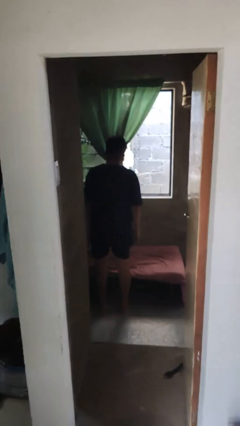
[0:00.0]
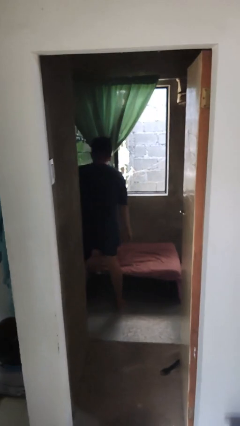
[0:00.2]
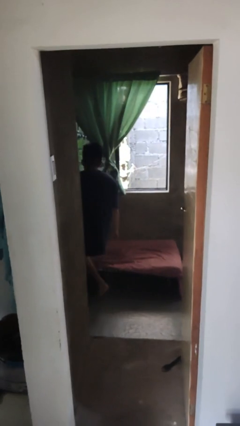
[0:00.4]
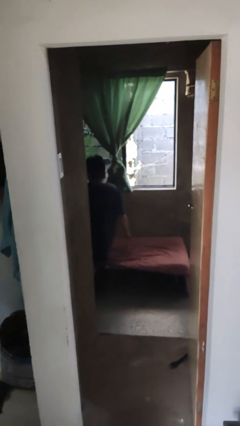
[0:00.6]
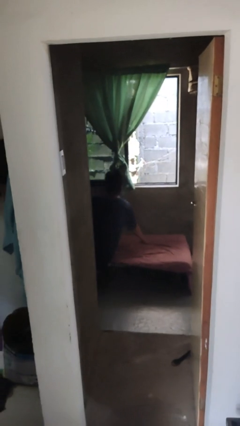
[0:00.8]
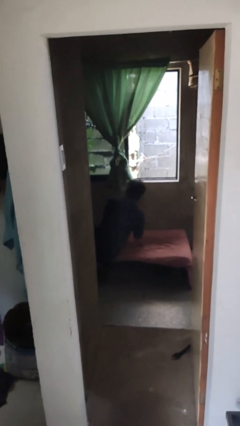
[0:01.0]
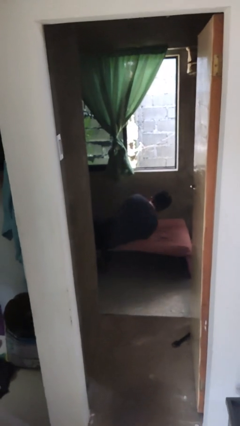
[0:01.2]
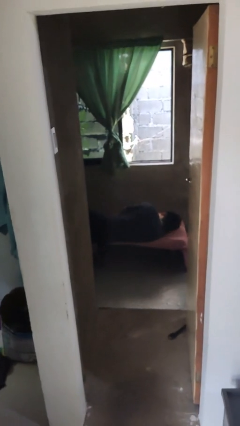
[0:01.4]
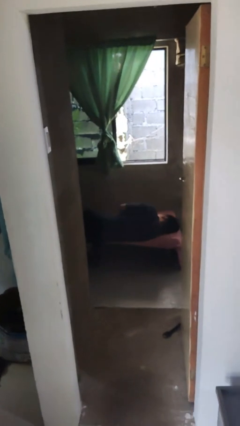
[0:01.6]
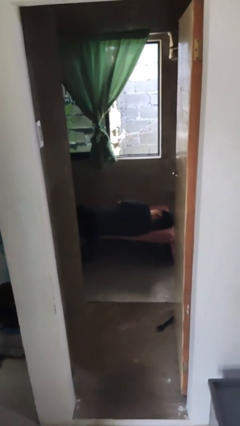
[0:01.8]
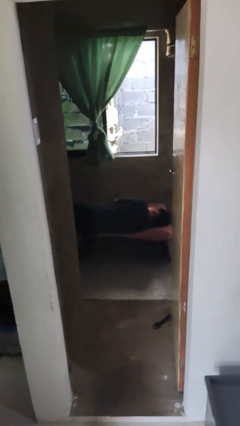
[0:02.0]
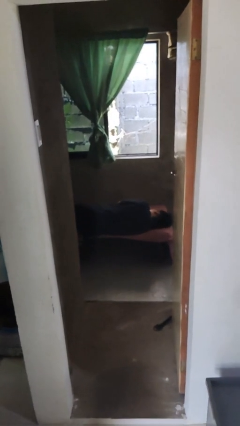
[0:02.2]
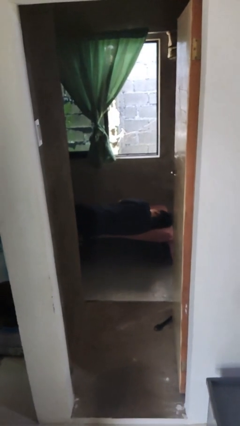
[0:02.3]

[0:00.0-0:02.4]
person lies down on bed

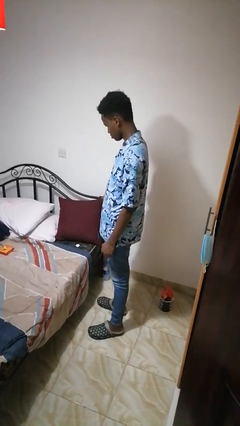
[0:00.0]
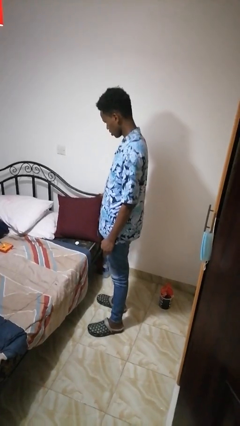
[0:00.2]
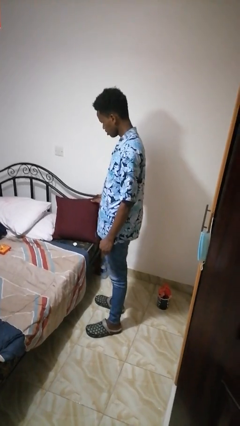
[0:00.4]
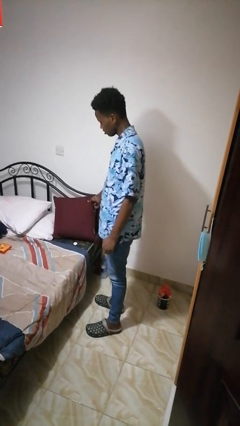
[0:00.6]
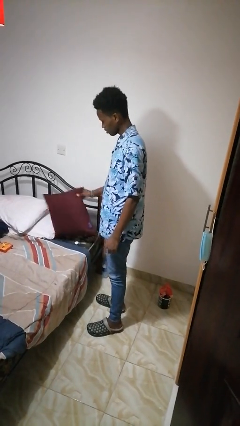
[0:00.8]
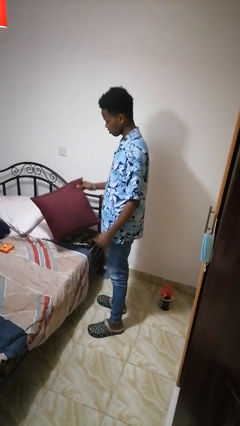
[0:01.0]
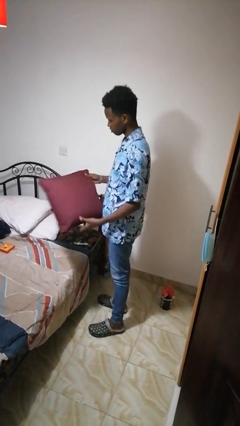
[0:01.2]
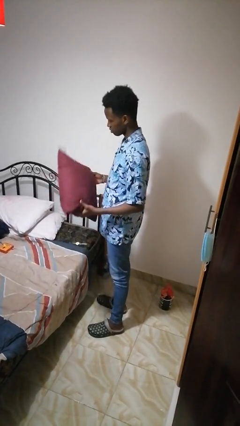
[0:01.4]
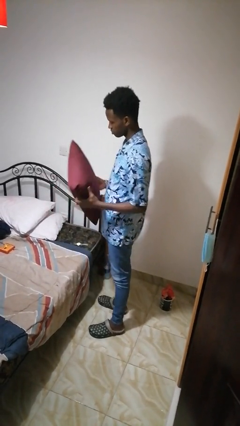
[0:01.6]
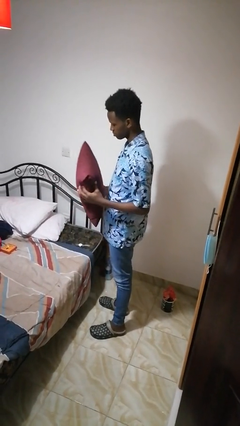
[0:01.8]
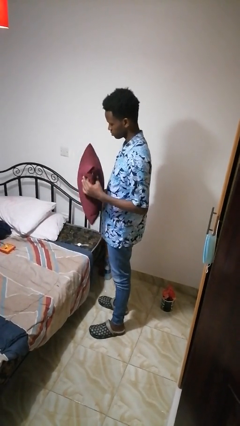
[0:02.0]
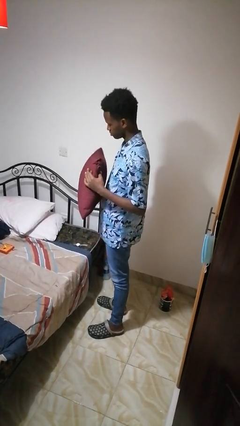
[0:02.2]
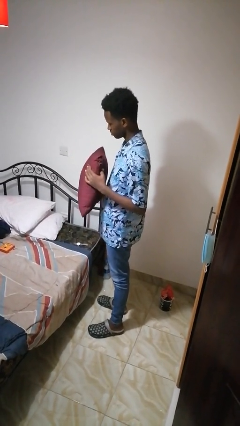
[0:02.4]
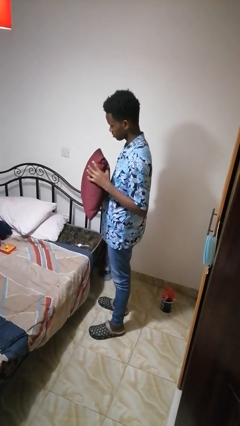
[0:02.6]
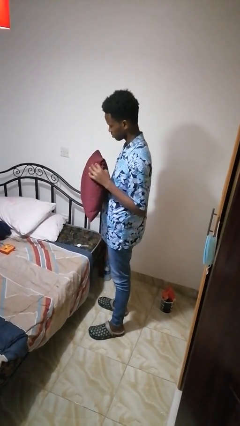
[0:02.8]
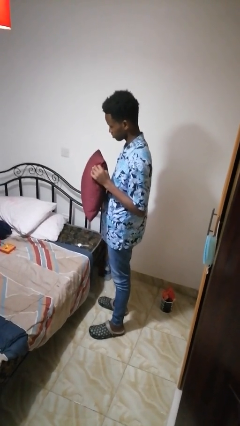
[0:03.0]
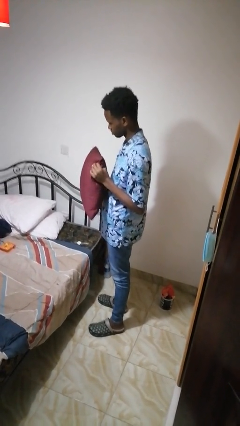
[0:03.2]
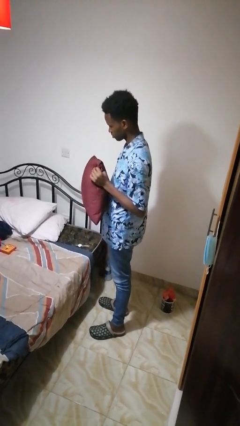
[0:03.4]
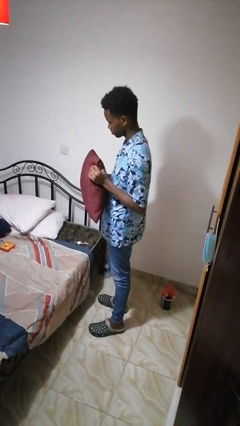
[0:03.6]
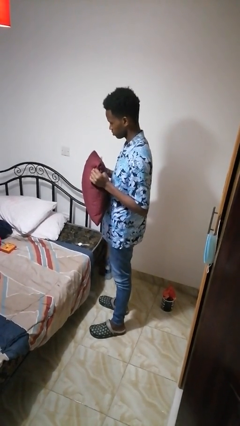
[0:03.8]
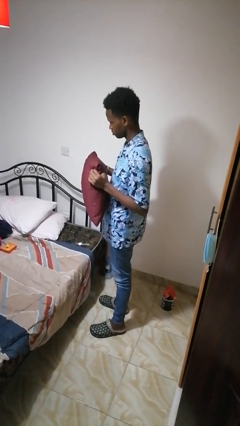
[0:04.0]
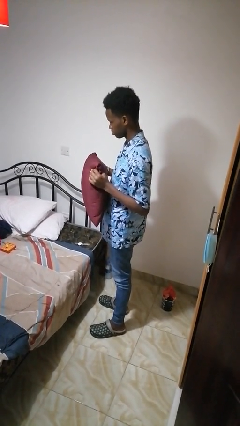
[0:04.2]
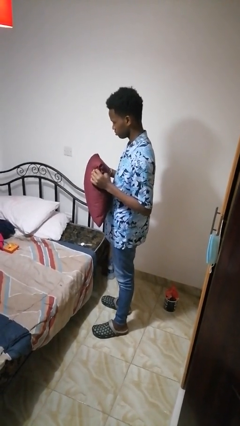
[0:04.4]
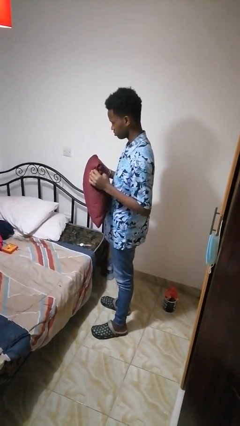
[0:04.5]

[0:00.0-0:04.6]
person picks up object from bed

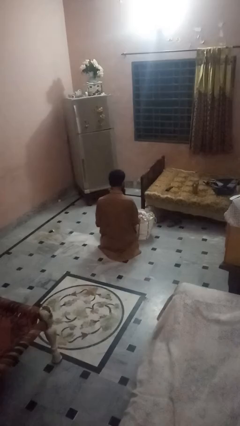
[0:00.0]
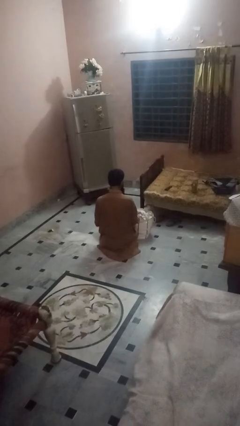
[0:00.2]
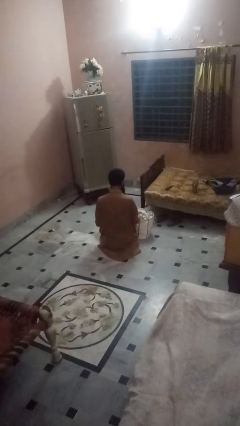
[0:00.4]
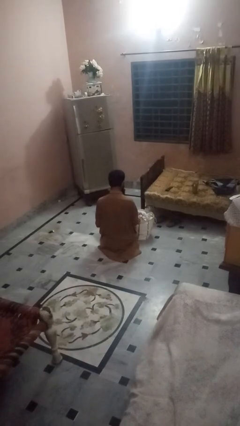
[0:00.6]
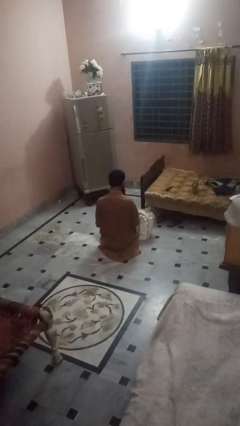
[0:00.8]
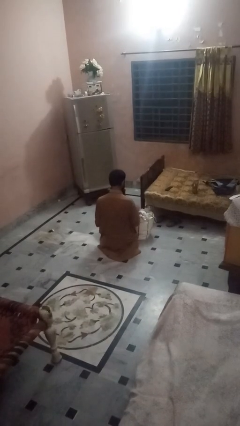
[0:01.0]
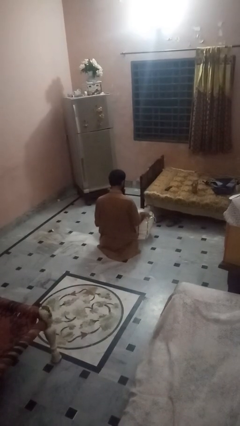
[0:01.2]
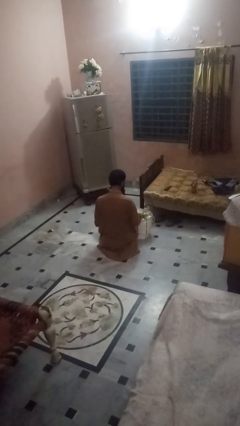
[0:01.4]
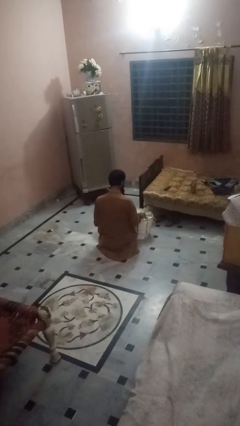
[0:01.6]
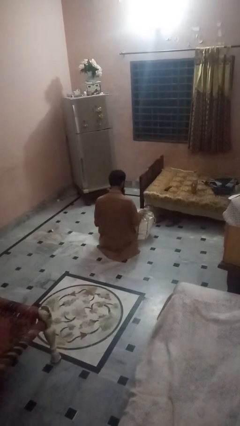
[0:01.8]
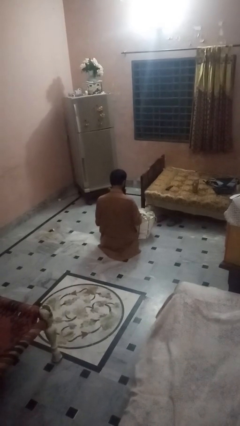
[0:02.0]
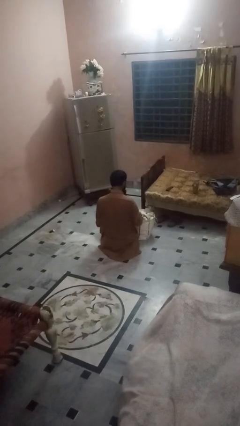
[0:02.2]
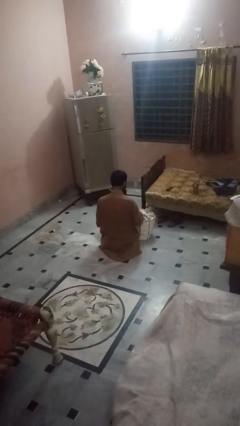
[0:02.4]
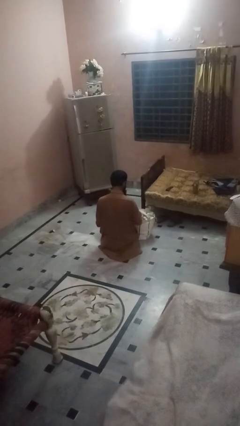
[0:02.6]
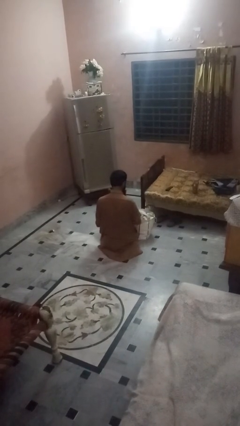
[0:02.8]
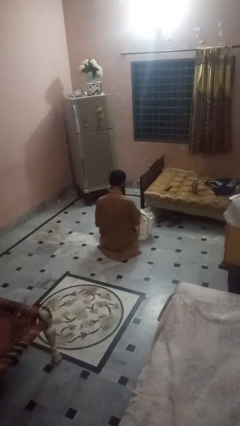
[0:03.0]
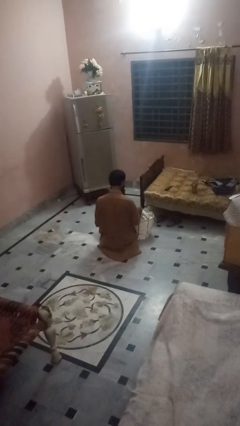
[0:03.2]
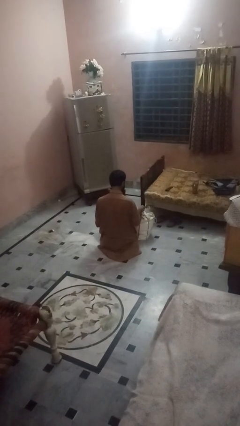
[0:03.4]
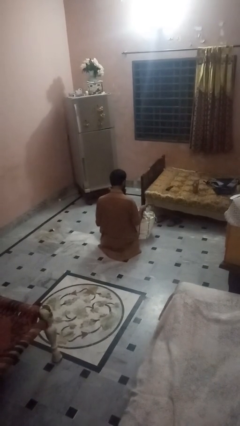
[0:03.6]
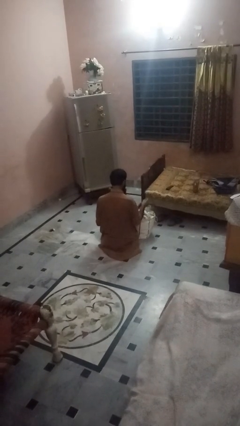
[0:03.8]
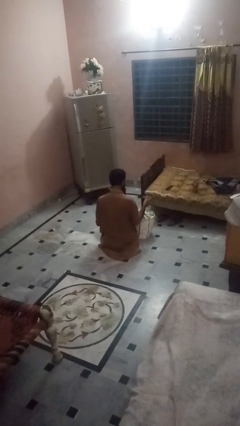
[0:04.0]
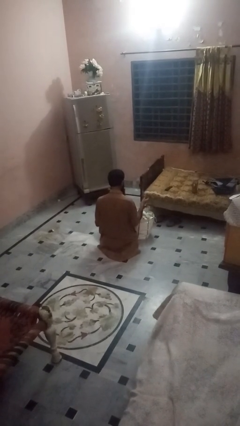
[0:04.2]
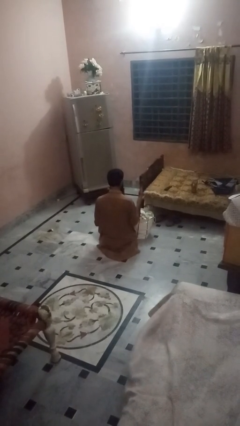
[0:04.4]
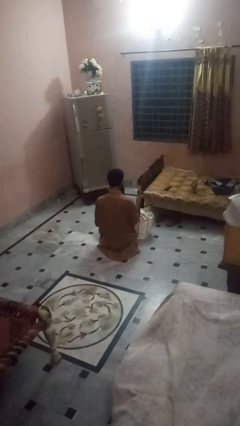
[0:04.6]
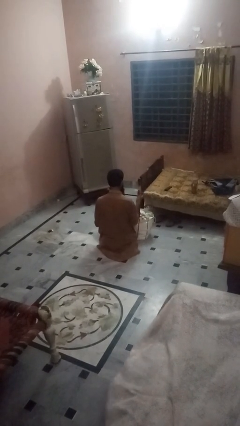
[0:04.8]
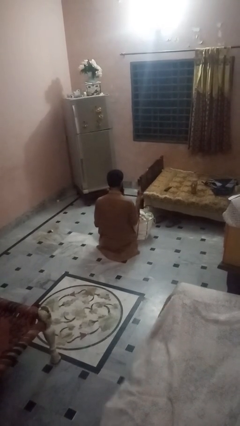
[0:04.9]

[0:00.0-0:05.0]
person takes object from bag

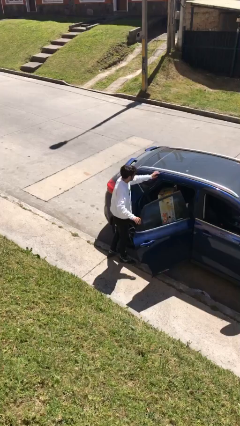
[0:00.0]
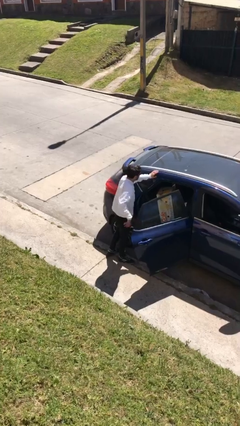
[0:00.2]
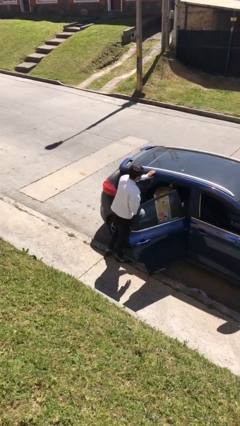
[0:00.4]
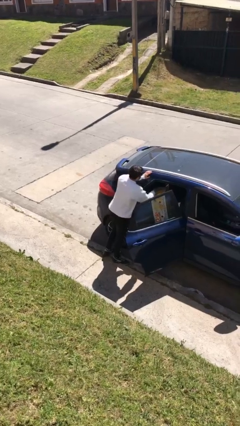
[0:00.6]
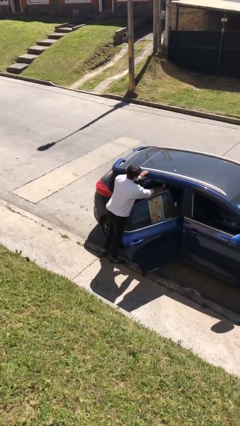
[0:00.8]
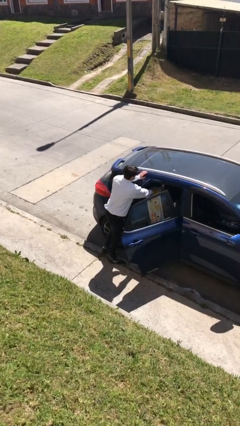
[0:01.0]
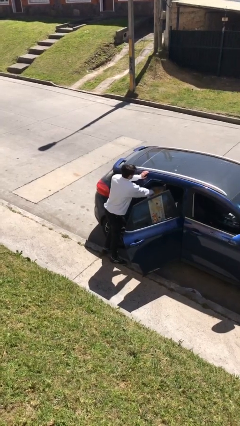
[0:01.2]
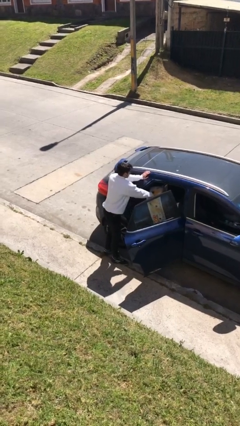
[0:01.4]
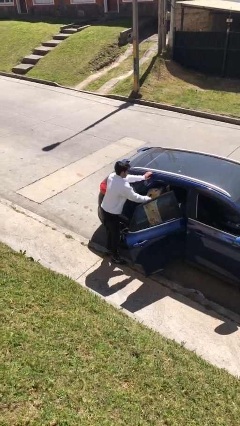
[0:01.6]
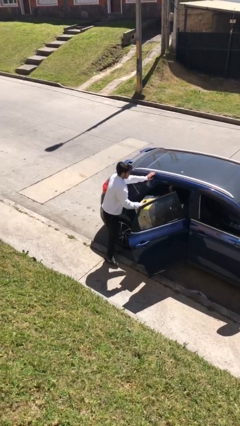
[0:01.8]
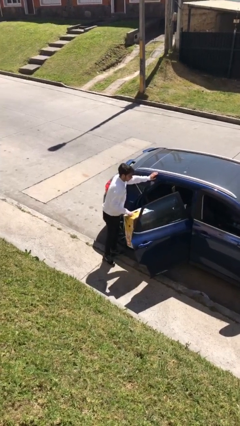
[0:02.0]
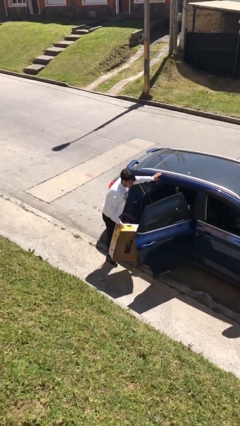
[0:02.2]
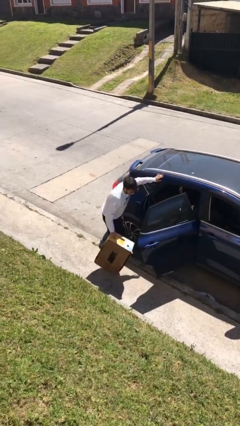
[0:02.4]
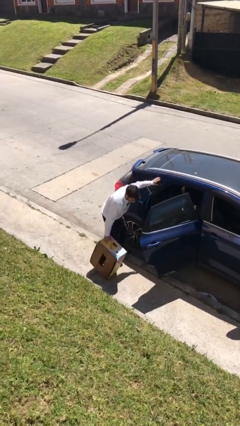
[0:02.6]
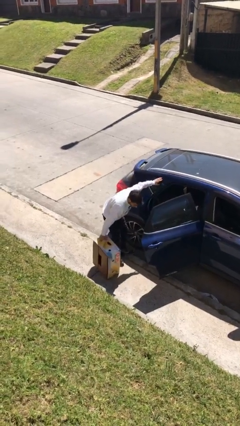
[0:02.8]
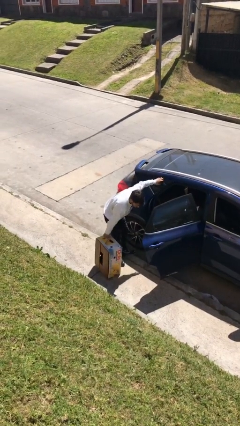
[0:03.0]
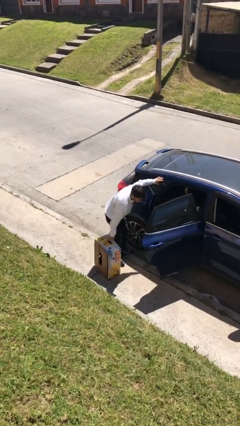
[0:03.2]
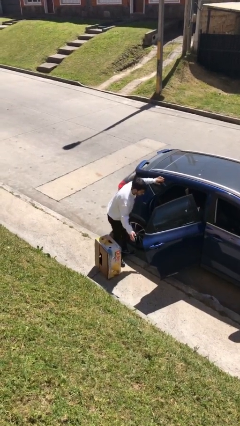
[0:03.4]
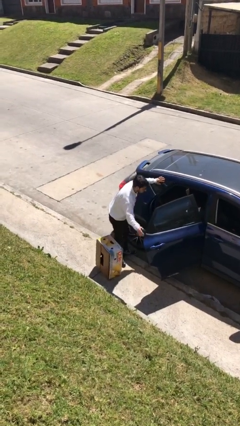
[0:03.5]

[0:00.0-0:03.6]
person unloads car

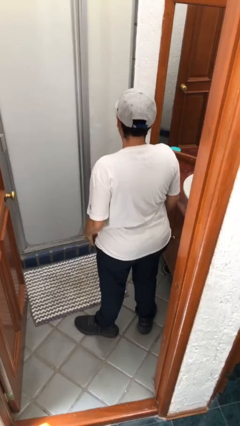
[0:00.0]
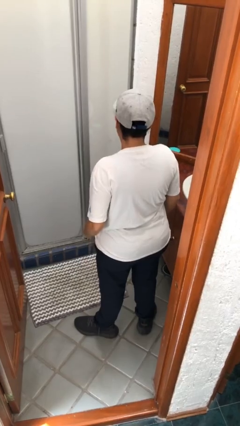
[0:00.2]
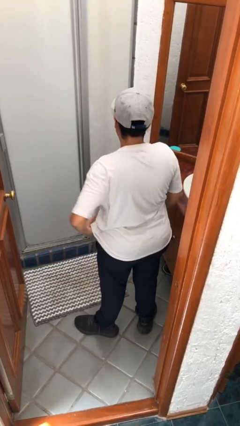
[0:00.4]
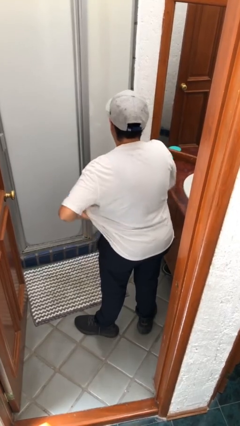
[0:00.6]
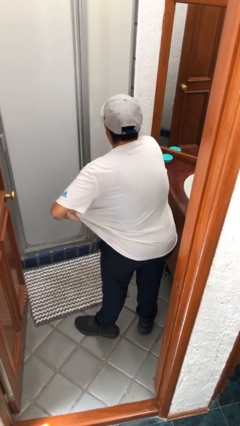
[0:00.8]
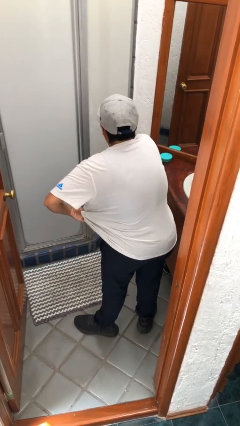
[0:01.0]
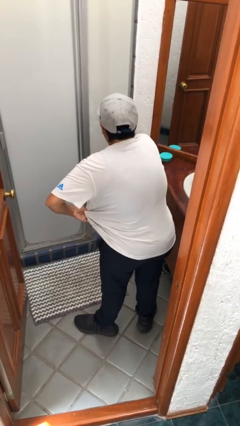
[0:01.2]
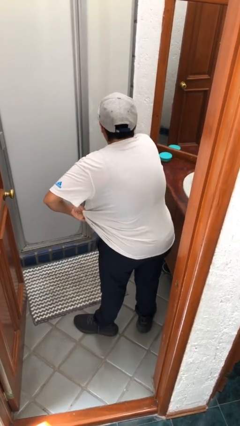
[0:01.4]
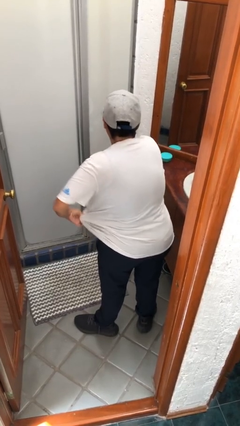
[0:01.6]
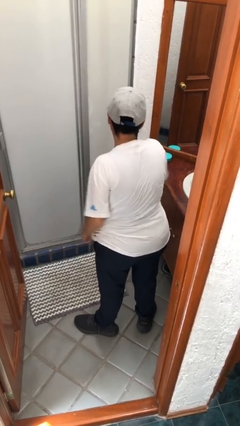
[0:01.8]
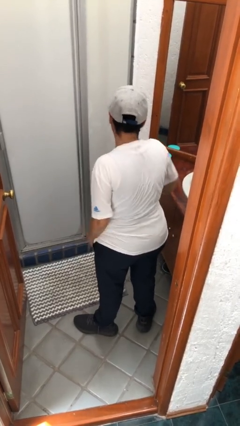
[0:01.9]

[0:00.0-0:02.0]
person applies deodorant
